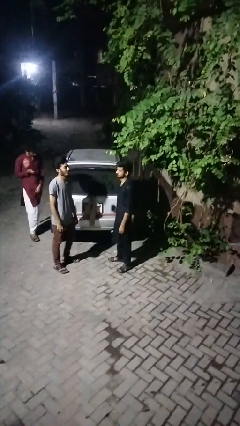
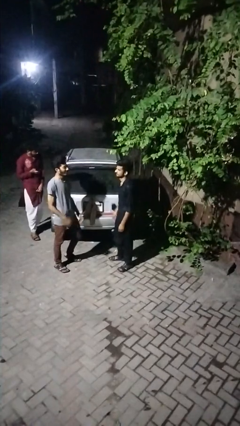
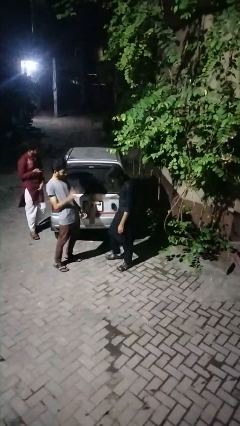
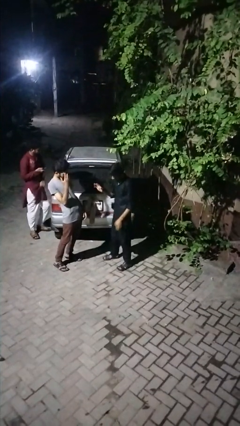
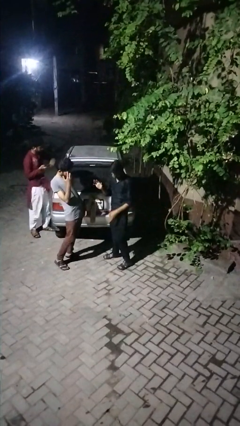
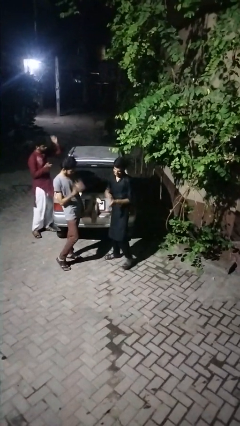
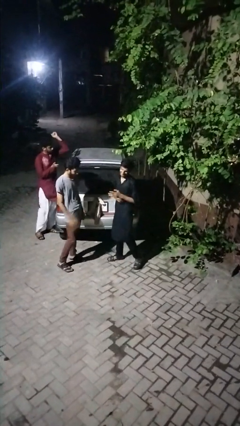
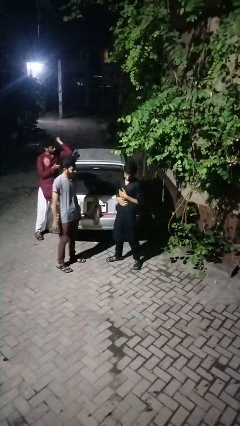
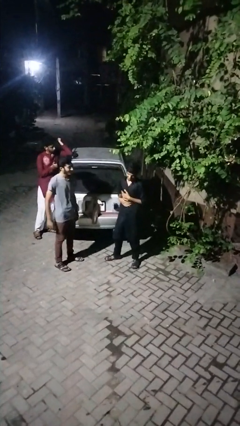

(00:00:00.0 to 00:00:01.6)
person laughs with person

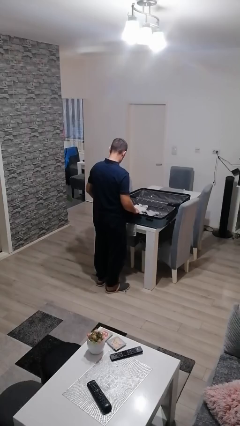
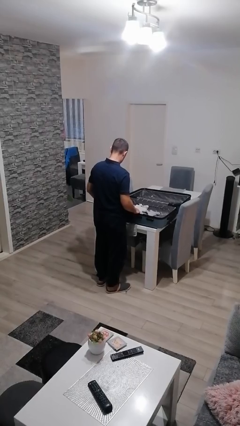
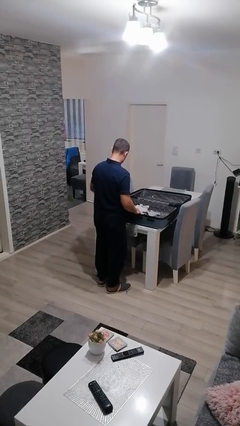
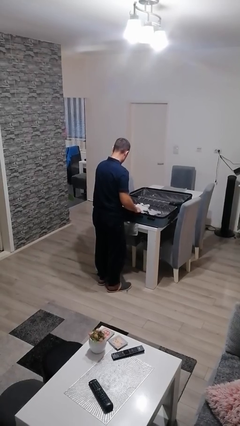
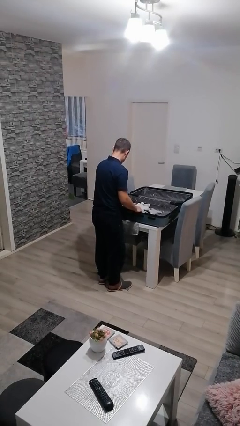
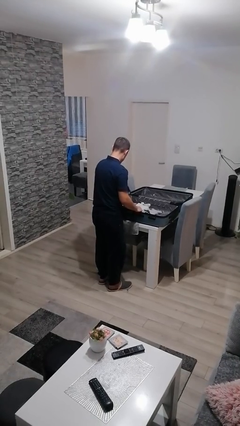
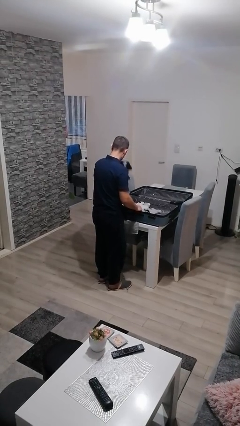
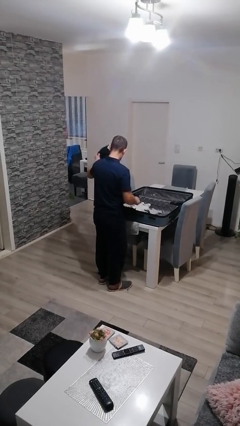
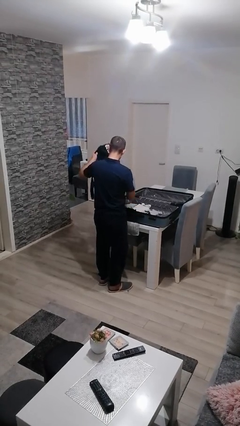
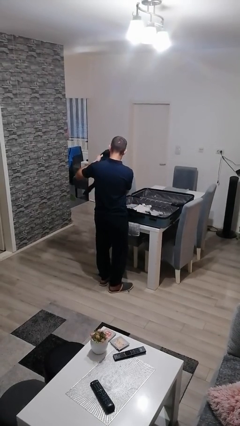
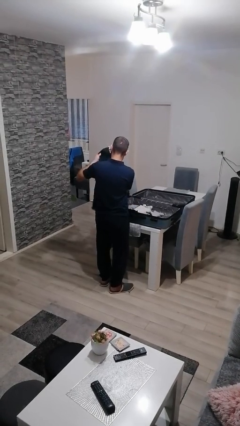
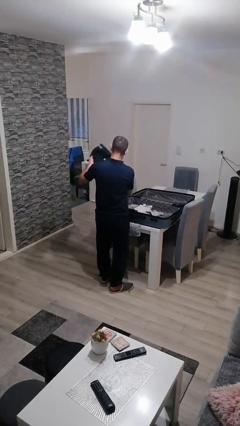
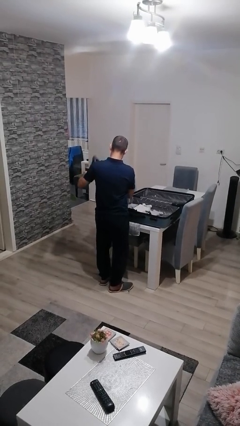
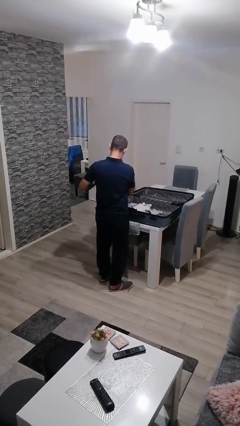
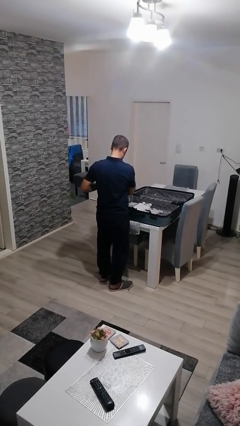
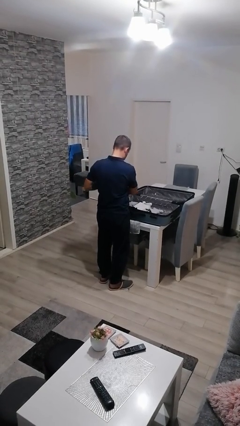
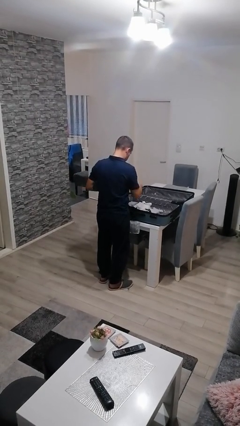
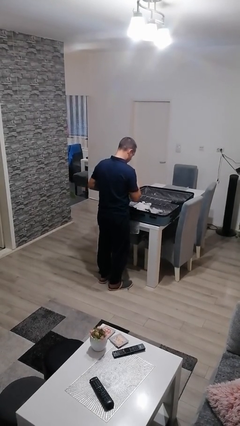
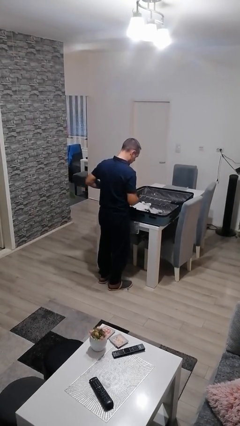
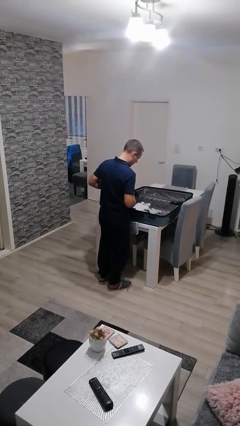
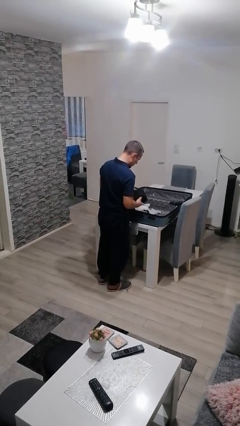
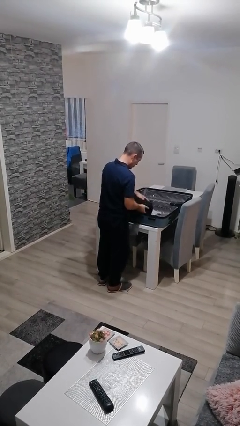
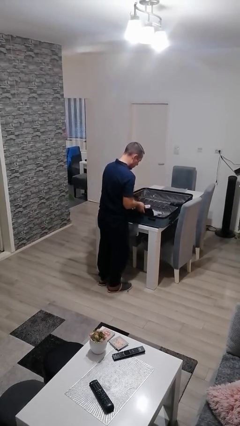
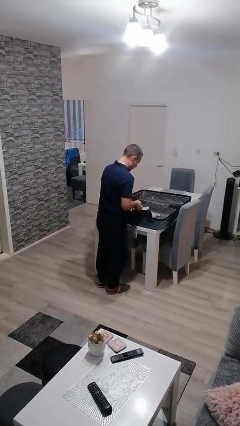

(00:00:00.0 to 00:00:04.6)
person loads clothes into suitcase

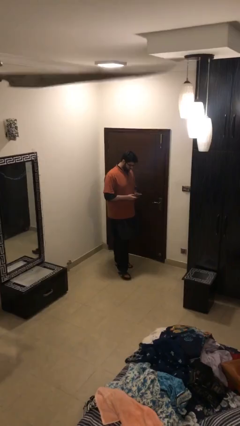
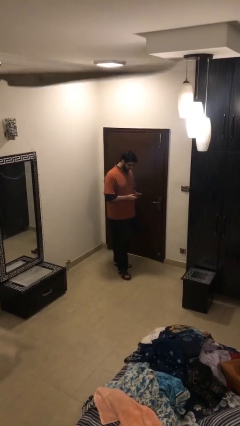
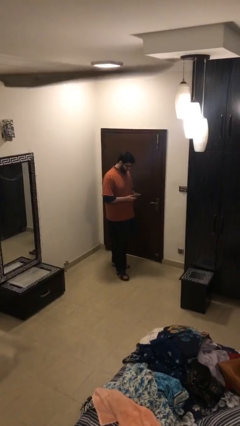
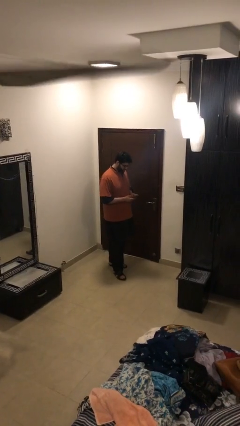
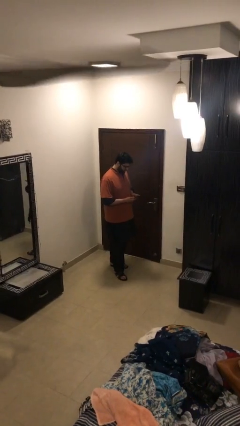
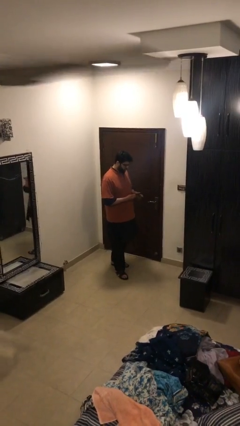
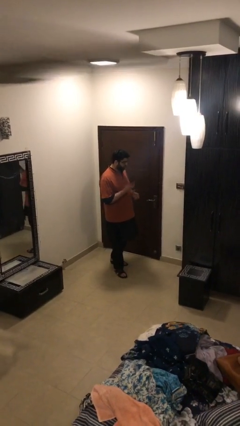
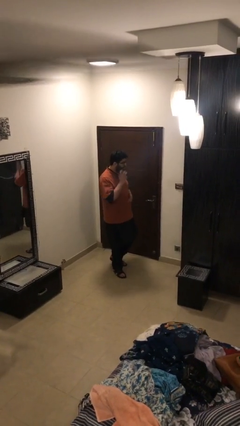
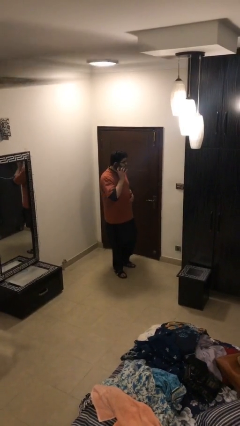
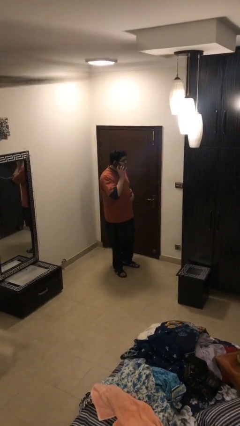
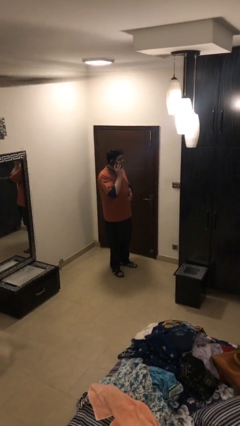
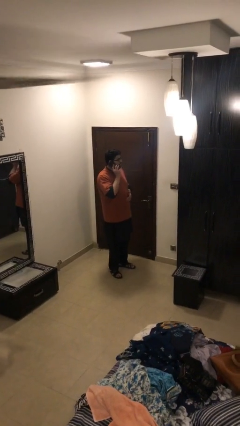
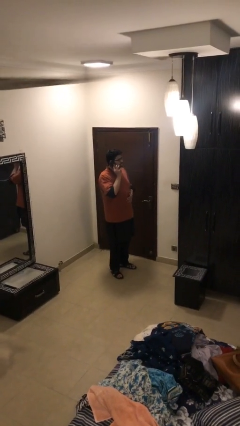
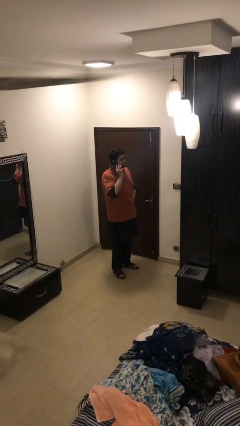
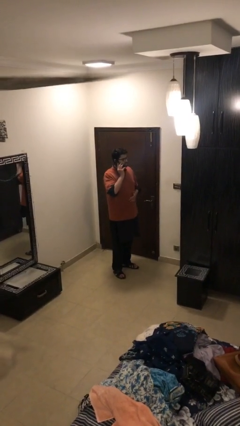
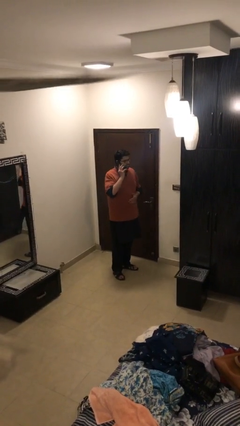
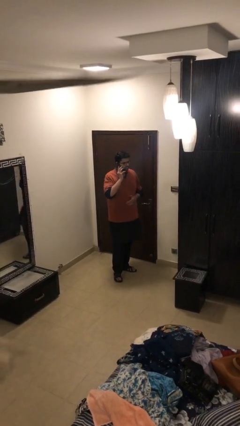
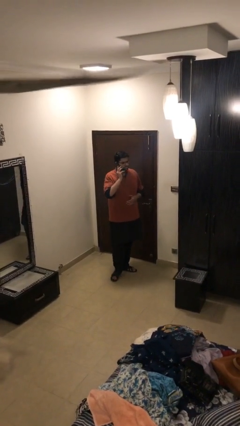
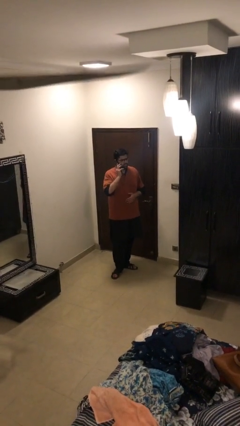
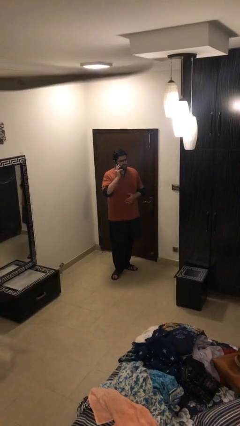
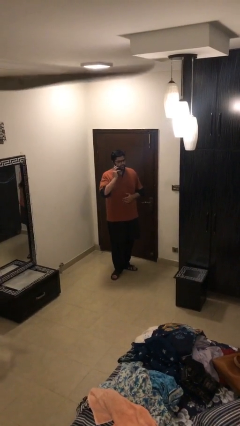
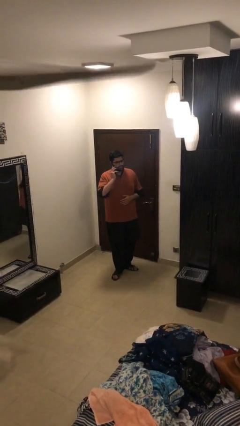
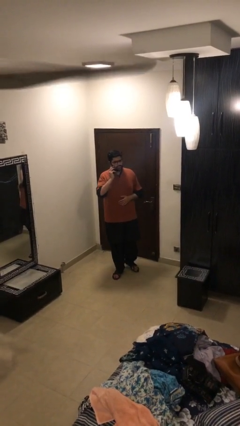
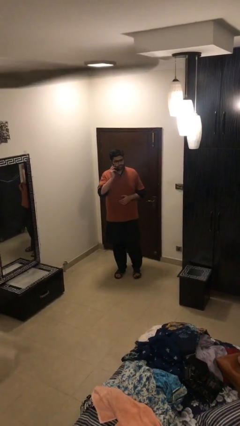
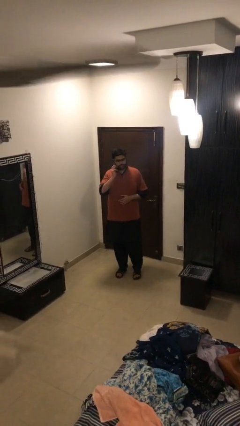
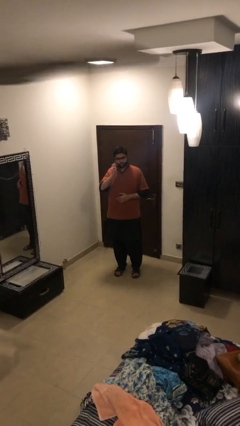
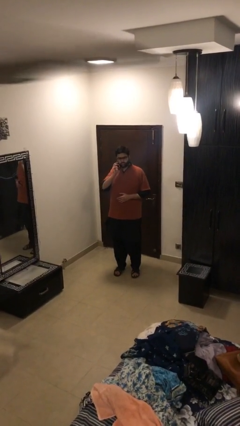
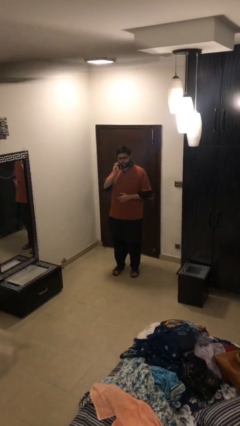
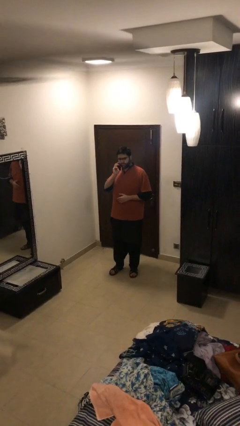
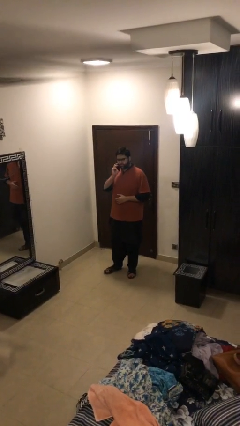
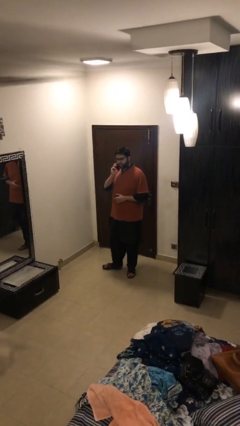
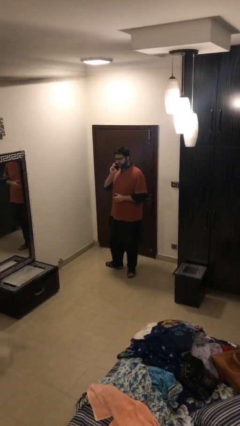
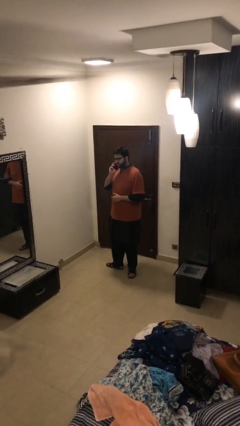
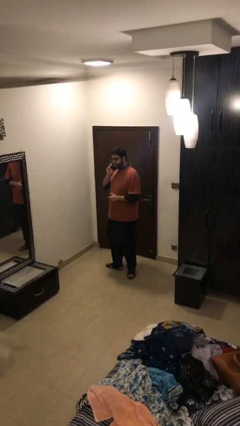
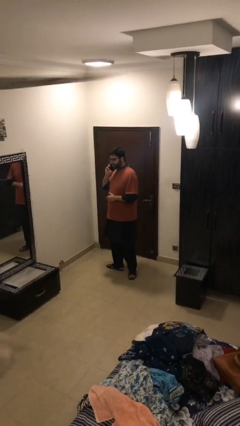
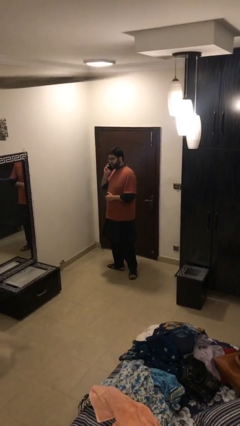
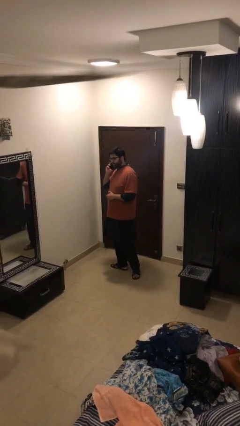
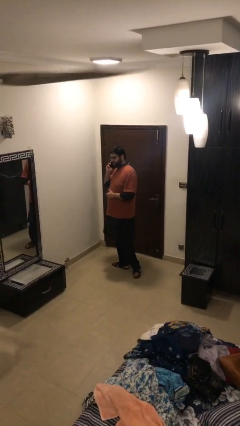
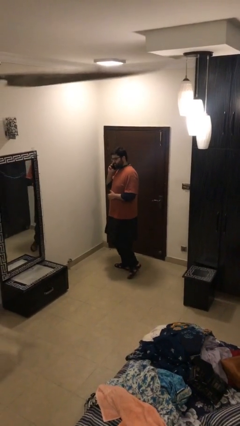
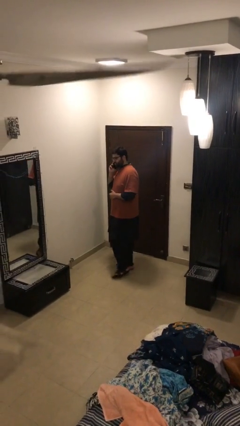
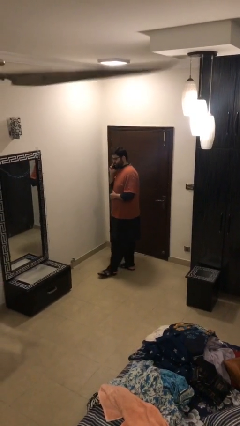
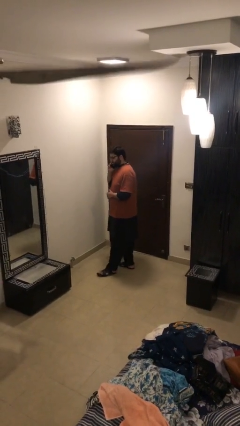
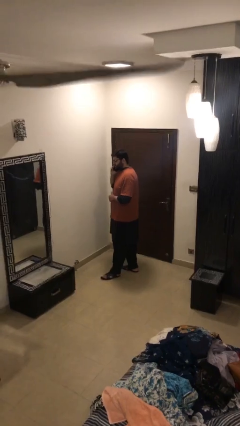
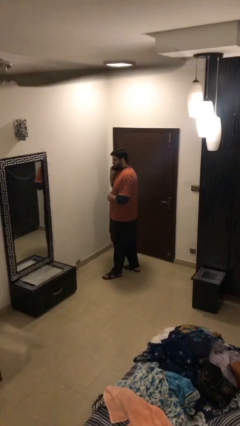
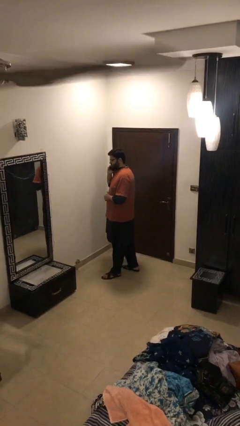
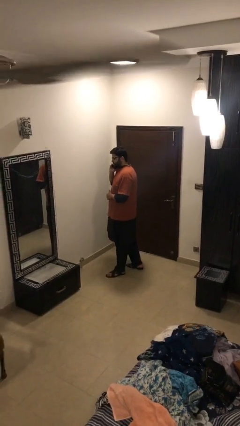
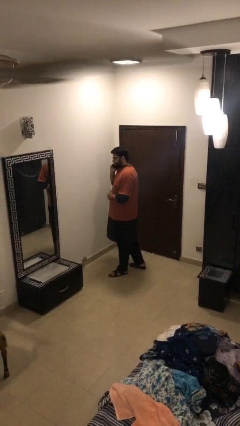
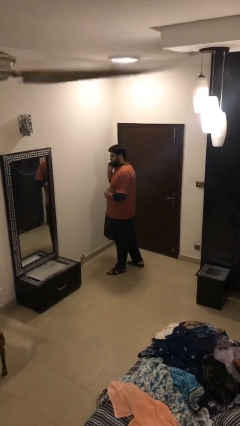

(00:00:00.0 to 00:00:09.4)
person talks on phone

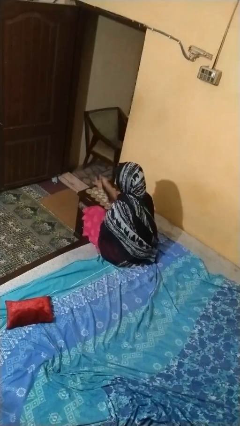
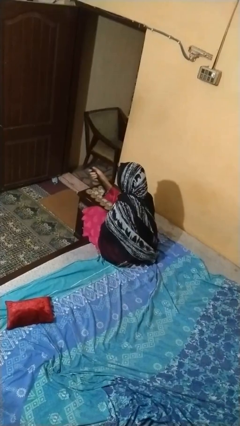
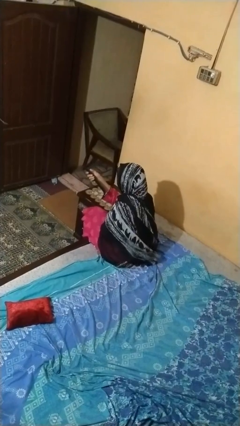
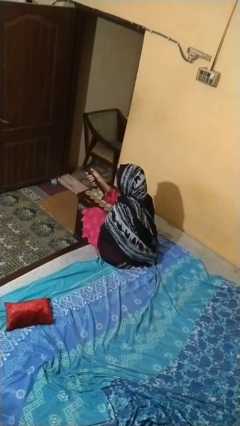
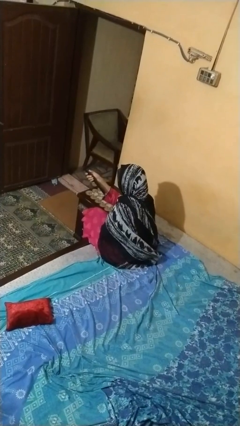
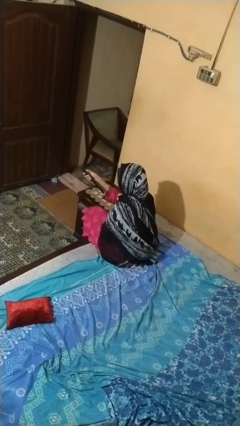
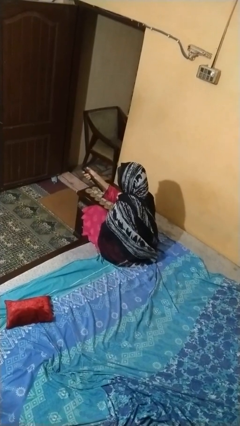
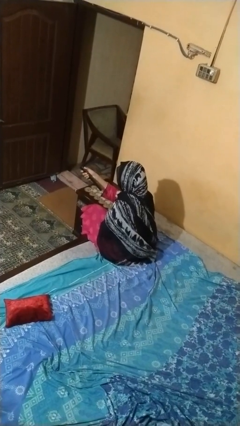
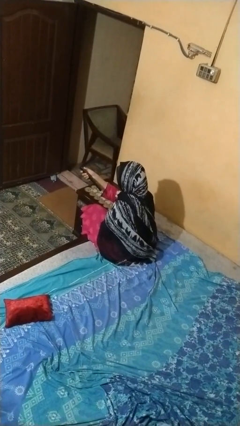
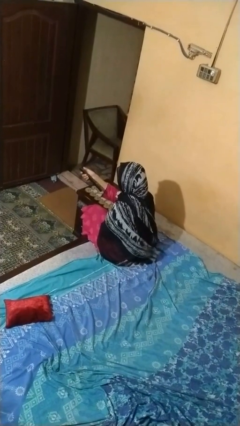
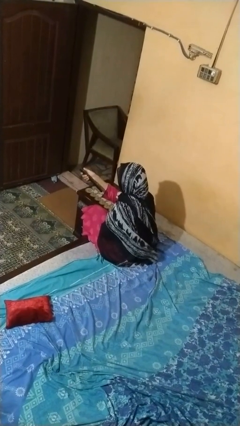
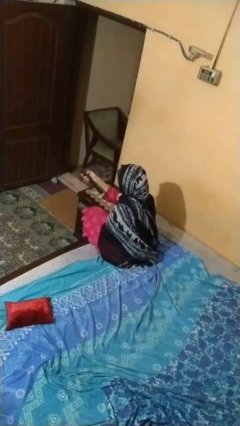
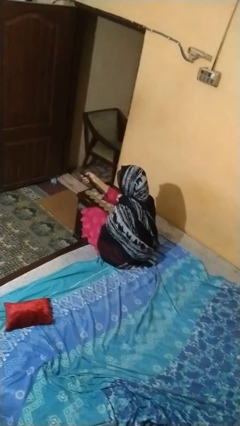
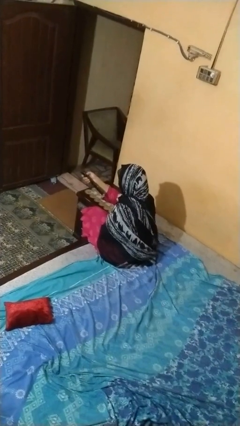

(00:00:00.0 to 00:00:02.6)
person uses television remote
